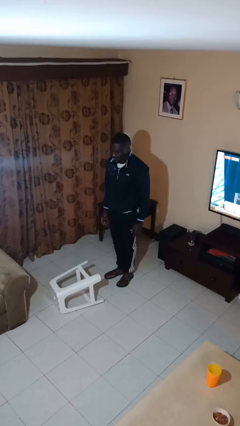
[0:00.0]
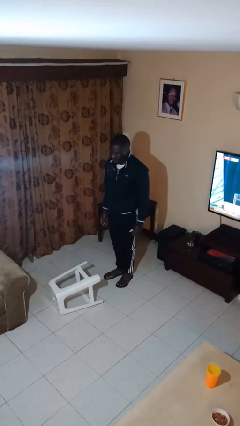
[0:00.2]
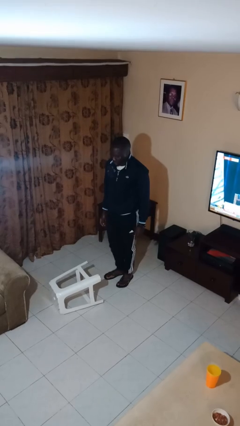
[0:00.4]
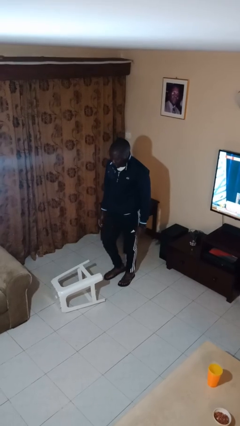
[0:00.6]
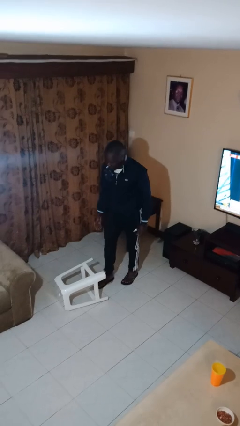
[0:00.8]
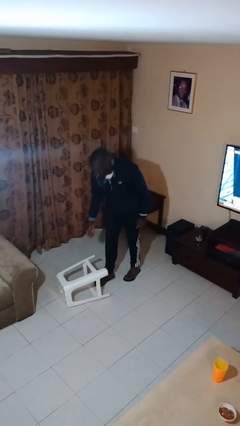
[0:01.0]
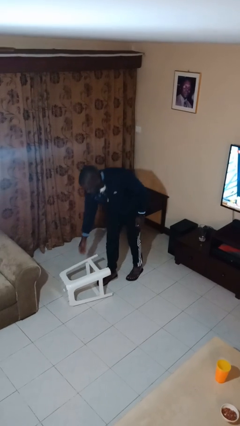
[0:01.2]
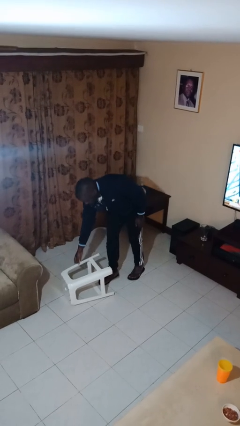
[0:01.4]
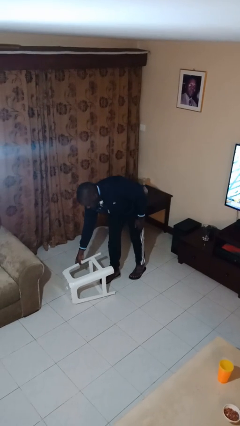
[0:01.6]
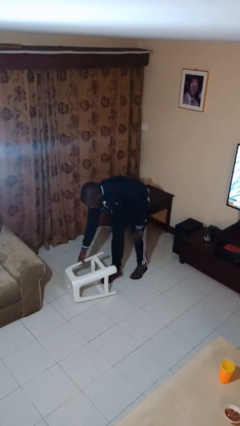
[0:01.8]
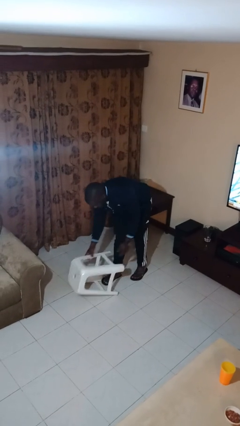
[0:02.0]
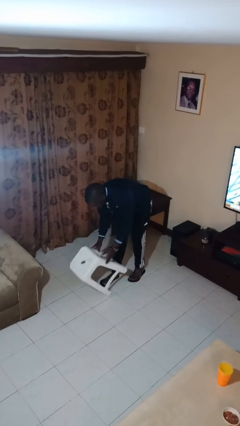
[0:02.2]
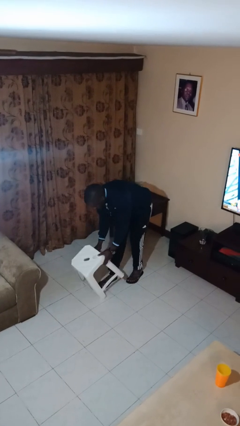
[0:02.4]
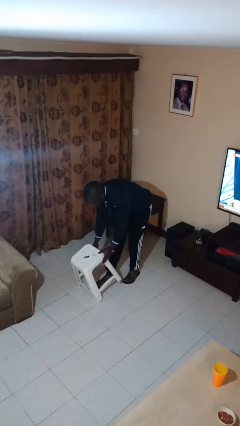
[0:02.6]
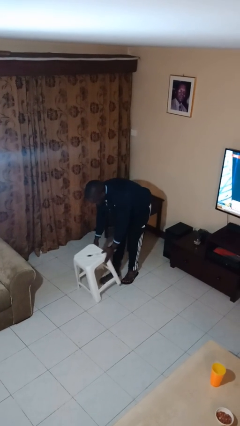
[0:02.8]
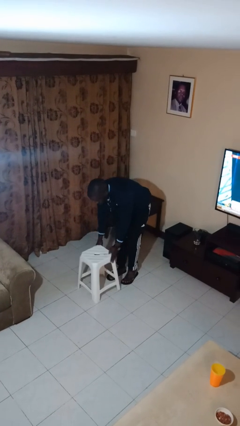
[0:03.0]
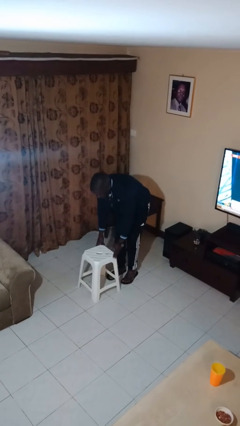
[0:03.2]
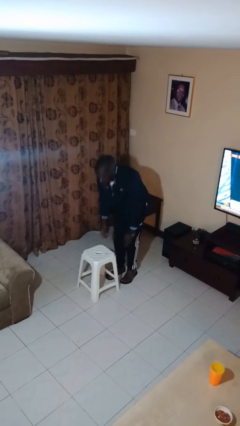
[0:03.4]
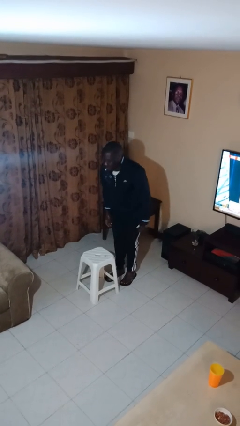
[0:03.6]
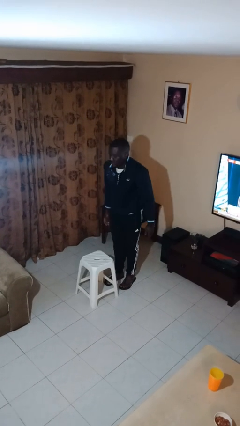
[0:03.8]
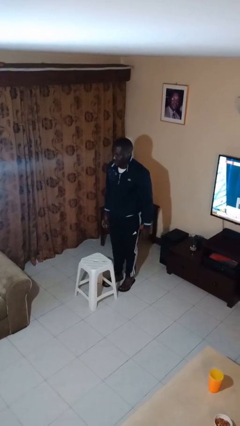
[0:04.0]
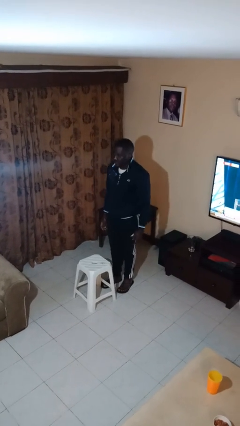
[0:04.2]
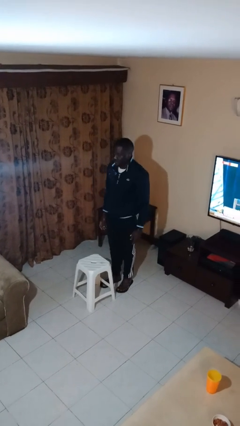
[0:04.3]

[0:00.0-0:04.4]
person sets upright furniture

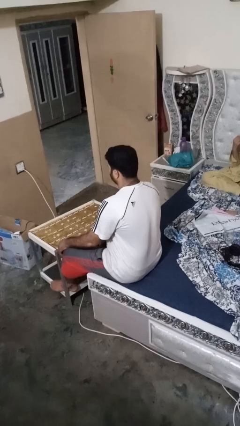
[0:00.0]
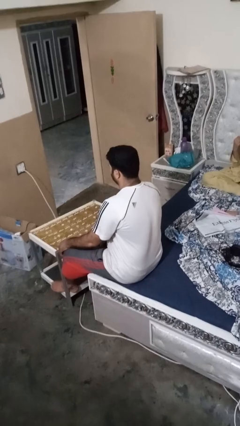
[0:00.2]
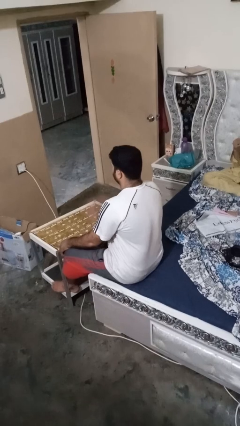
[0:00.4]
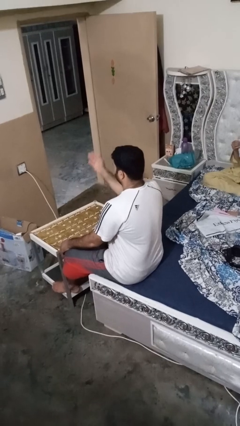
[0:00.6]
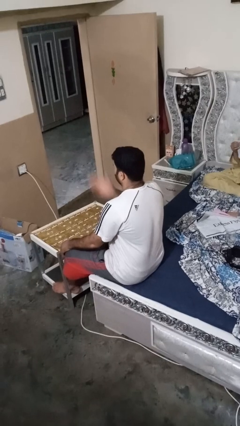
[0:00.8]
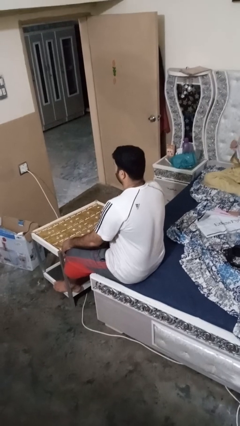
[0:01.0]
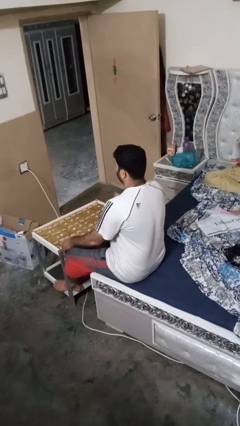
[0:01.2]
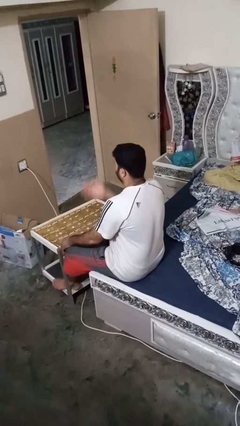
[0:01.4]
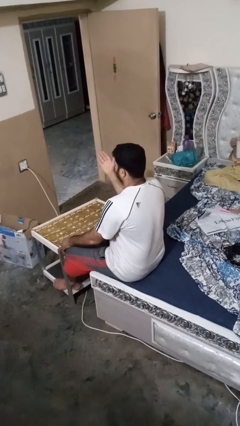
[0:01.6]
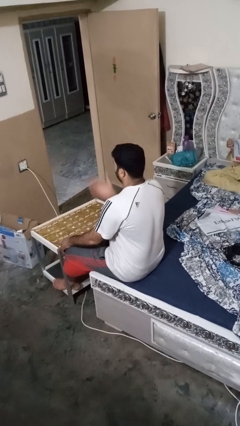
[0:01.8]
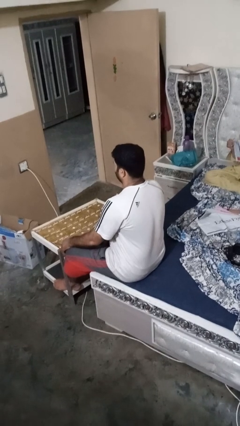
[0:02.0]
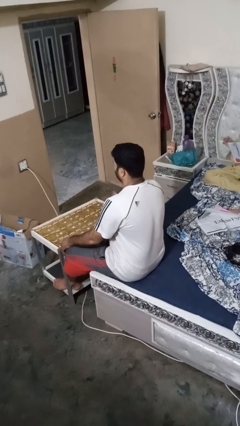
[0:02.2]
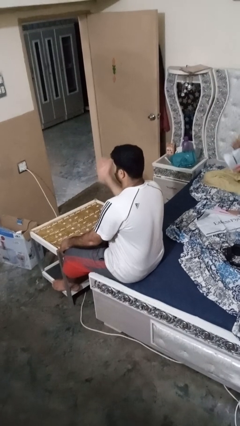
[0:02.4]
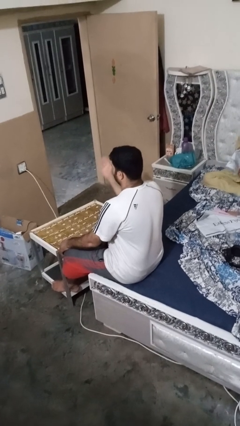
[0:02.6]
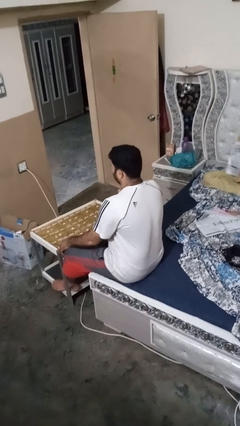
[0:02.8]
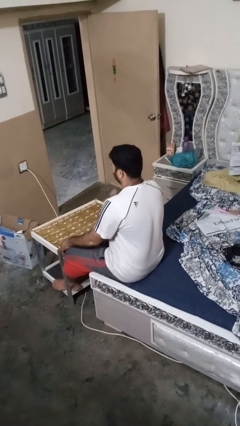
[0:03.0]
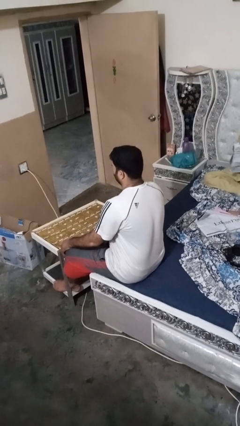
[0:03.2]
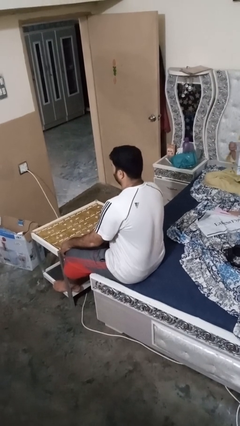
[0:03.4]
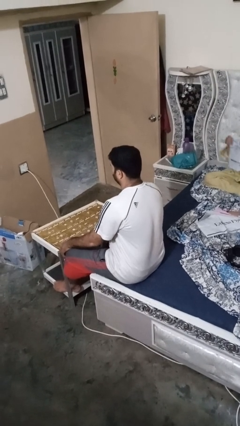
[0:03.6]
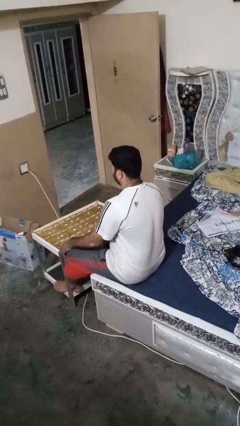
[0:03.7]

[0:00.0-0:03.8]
person drums on chest

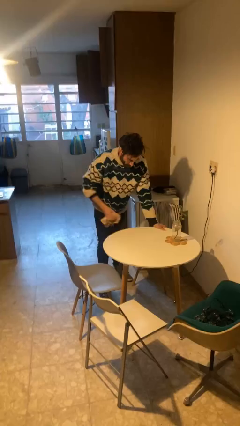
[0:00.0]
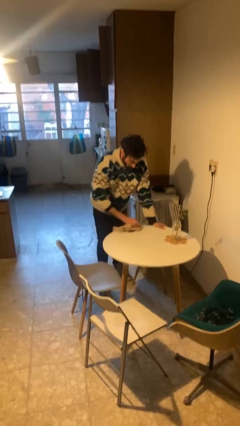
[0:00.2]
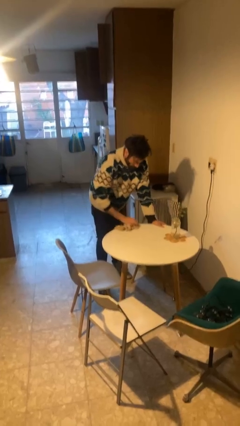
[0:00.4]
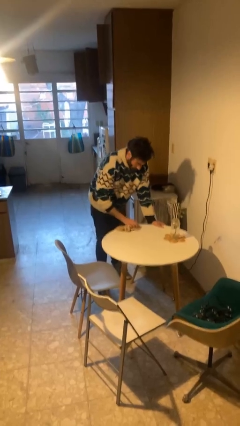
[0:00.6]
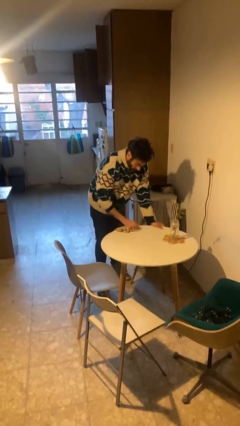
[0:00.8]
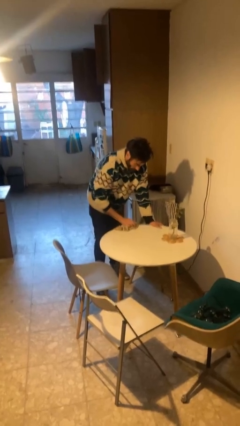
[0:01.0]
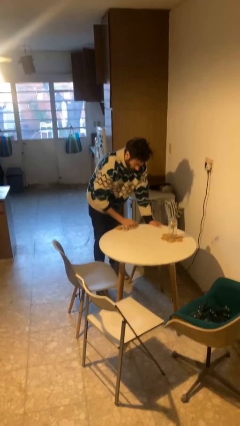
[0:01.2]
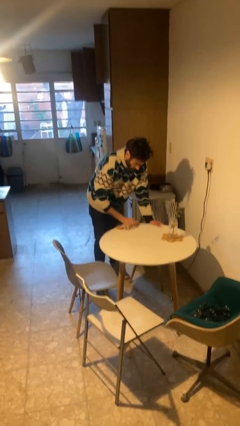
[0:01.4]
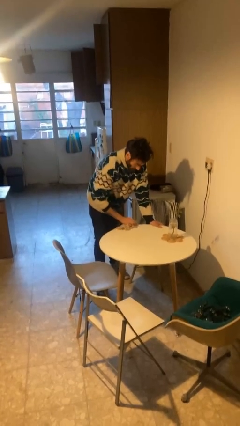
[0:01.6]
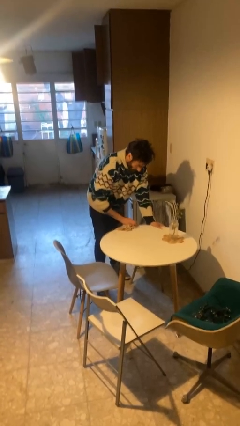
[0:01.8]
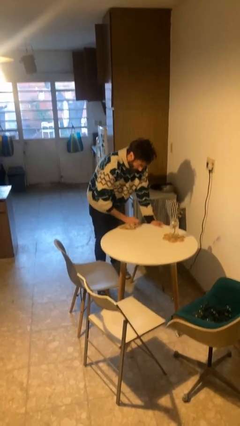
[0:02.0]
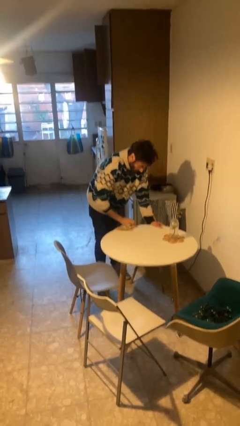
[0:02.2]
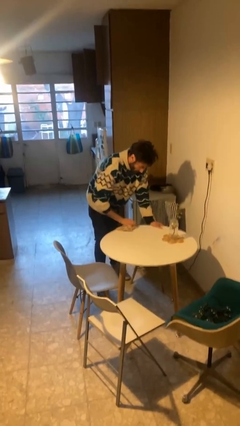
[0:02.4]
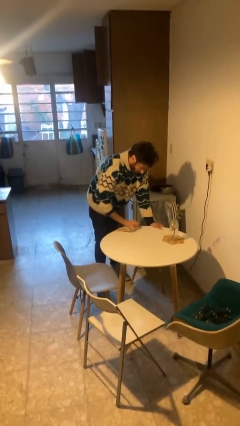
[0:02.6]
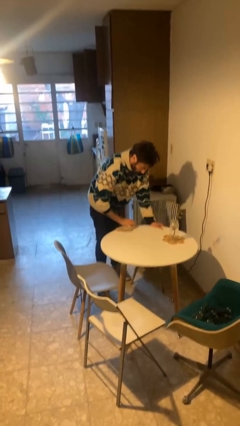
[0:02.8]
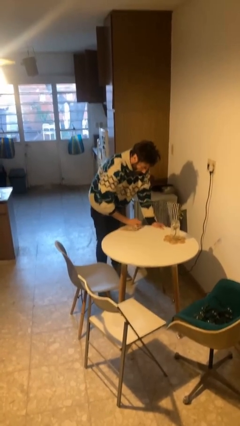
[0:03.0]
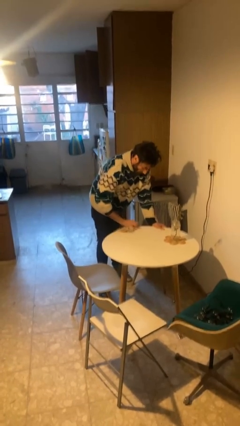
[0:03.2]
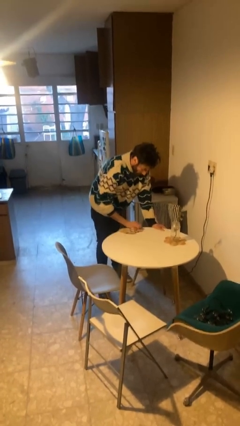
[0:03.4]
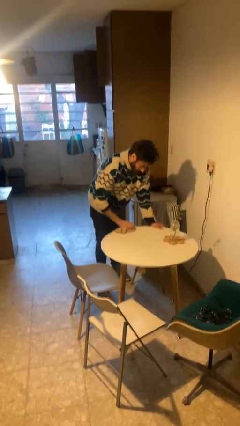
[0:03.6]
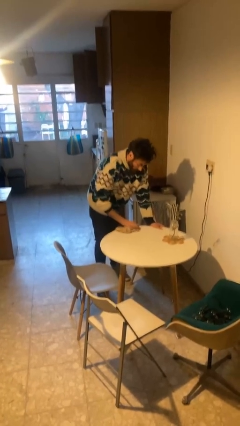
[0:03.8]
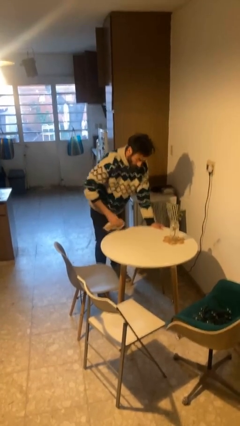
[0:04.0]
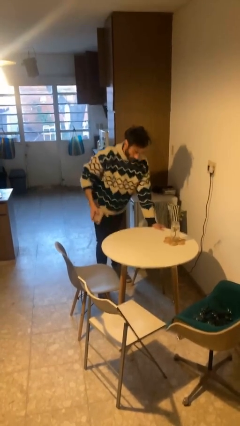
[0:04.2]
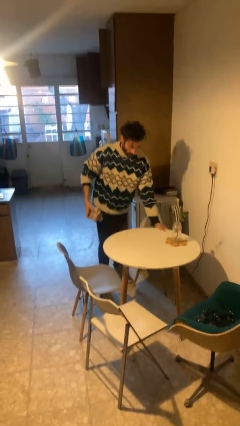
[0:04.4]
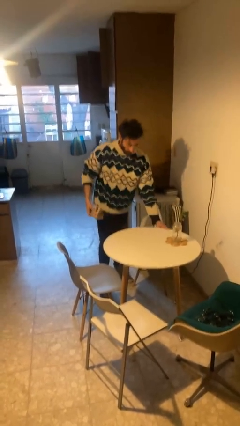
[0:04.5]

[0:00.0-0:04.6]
person cleans table with rag

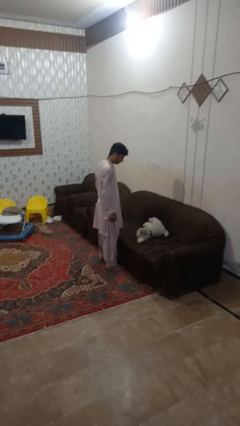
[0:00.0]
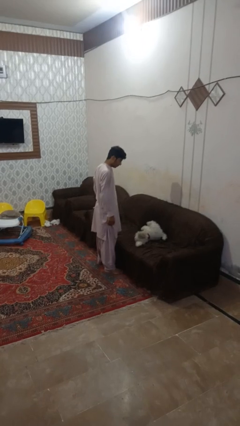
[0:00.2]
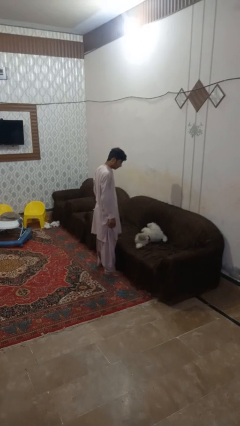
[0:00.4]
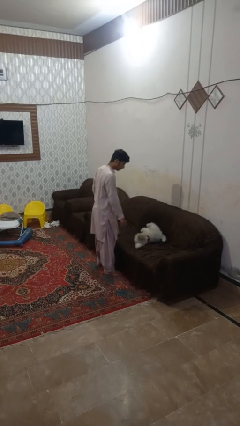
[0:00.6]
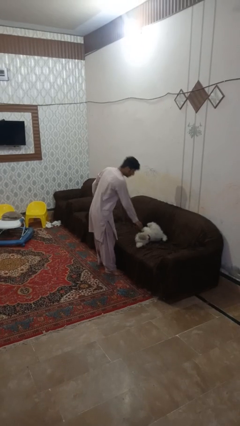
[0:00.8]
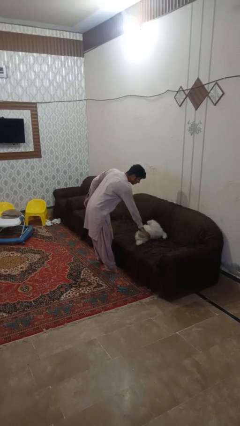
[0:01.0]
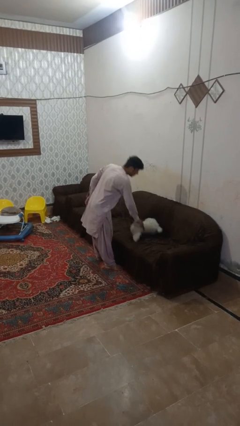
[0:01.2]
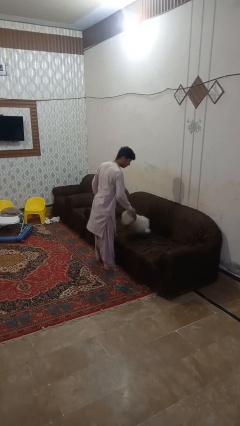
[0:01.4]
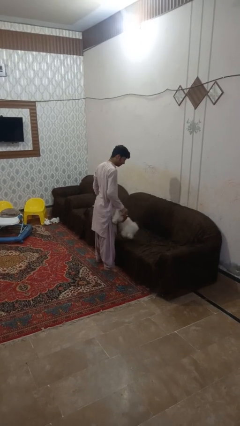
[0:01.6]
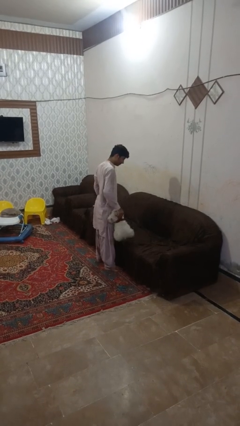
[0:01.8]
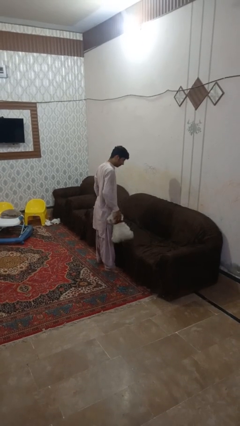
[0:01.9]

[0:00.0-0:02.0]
person picks up object from couch

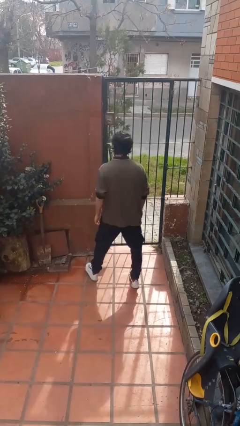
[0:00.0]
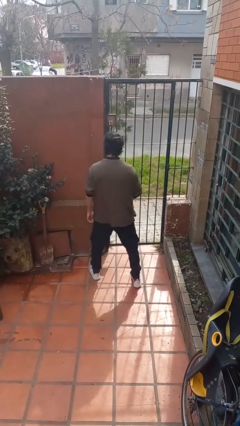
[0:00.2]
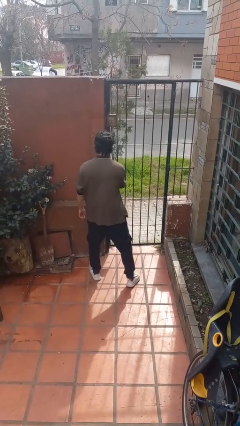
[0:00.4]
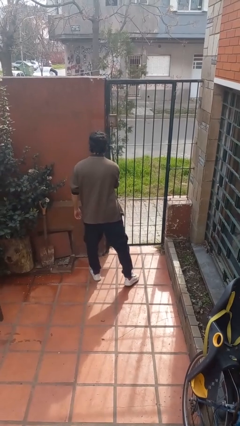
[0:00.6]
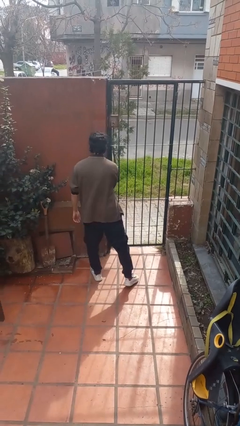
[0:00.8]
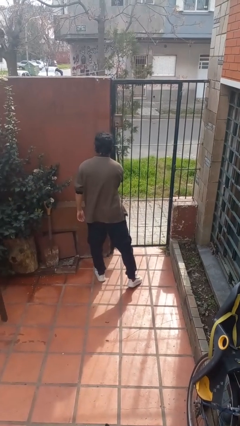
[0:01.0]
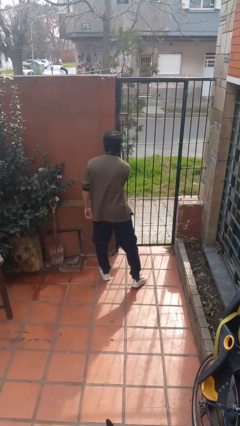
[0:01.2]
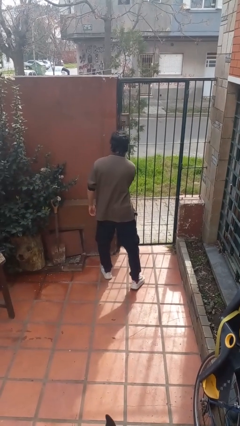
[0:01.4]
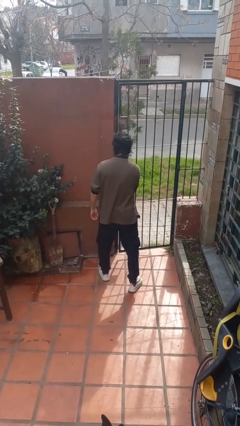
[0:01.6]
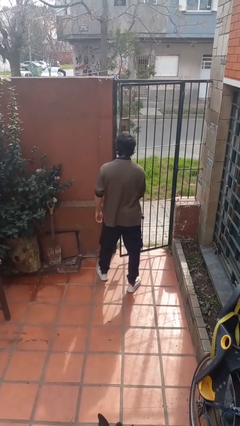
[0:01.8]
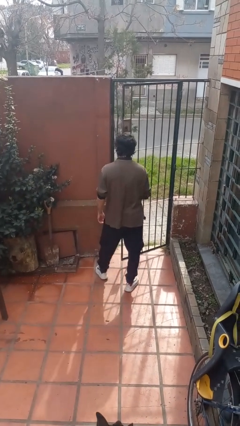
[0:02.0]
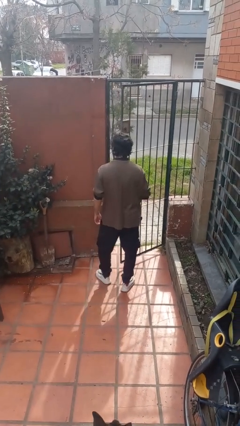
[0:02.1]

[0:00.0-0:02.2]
person opens gate

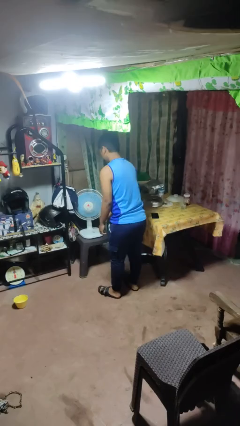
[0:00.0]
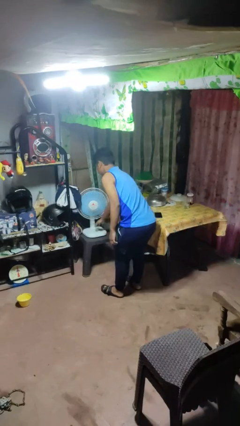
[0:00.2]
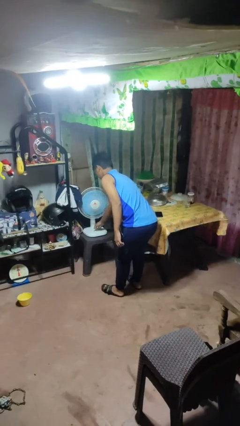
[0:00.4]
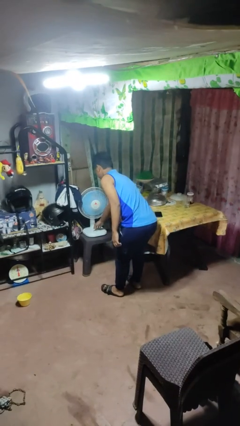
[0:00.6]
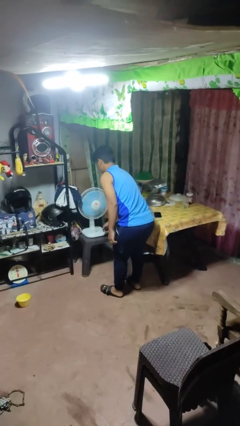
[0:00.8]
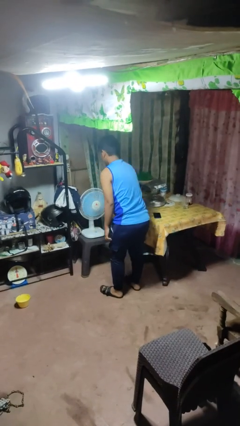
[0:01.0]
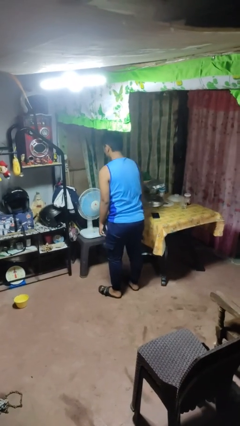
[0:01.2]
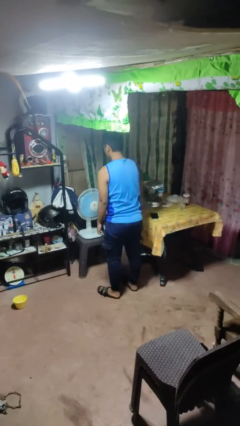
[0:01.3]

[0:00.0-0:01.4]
person turns off fan
